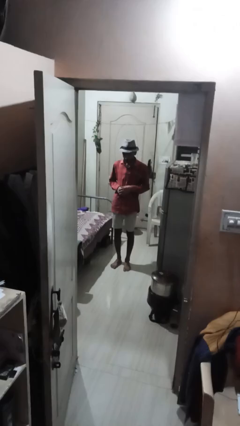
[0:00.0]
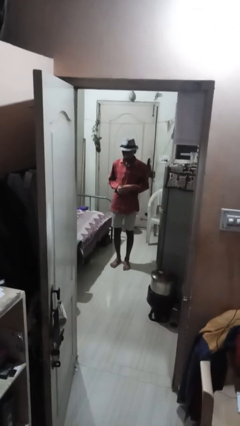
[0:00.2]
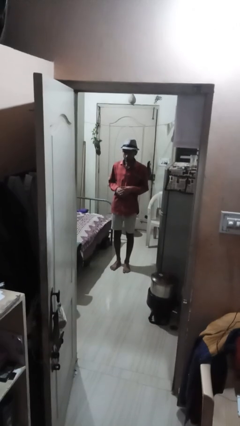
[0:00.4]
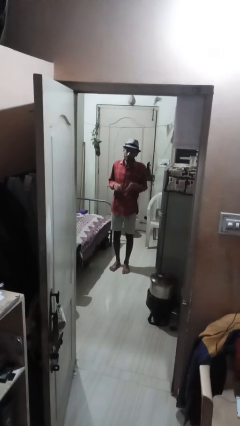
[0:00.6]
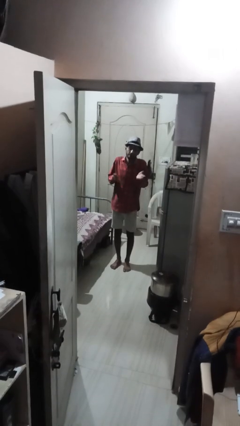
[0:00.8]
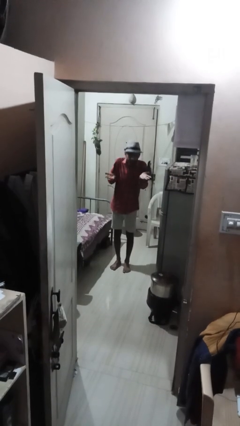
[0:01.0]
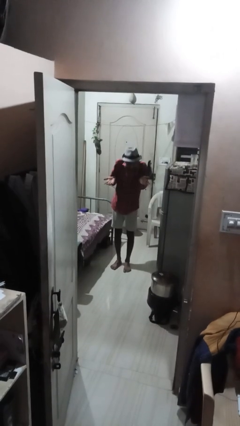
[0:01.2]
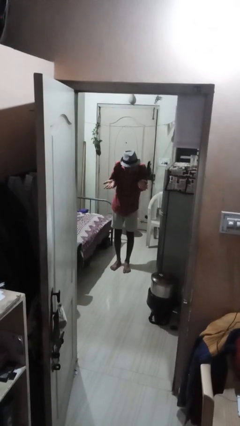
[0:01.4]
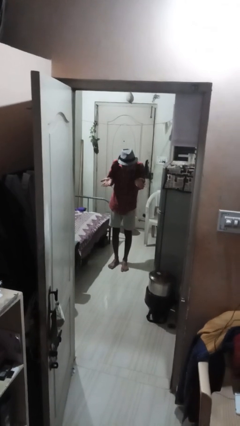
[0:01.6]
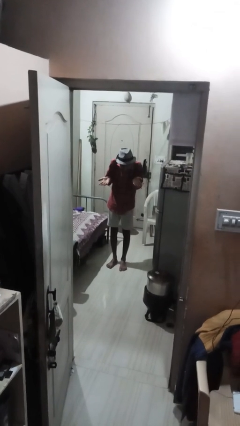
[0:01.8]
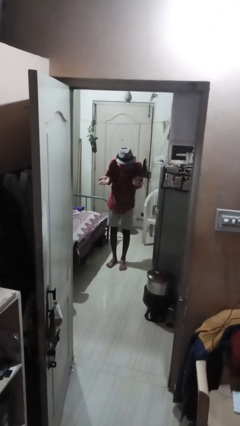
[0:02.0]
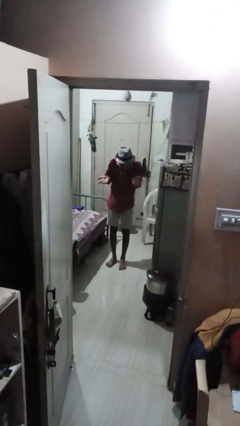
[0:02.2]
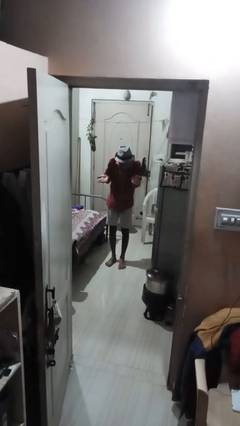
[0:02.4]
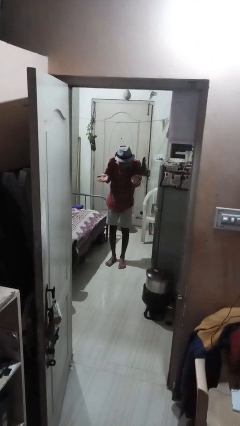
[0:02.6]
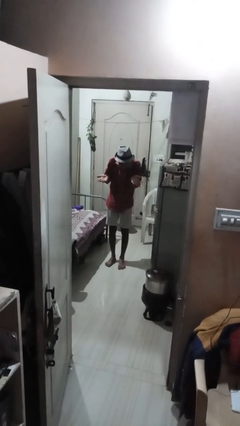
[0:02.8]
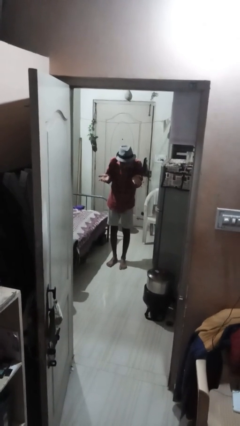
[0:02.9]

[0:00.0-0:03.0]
person shrugs

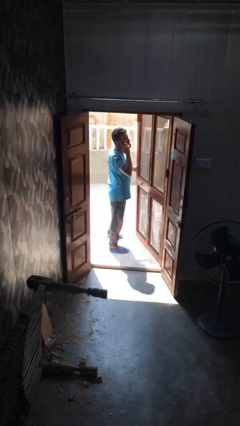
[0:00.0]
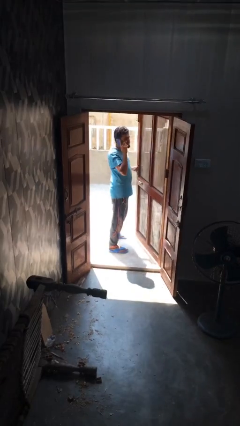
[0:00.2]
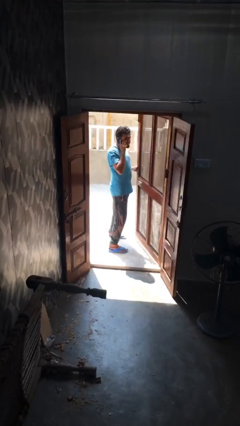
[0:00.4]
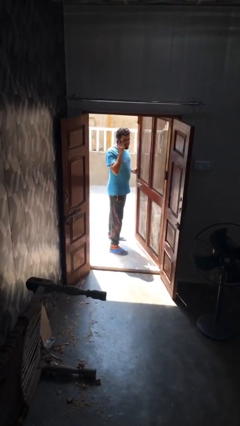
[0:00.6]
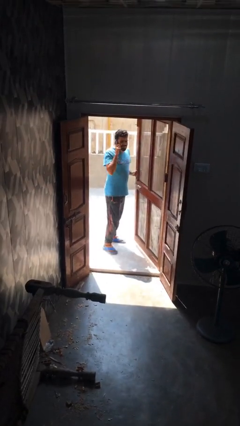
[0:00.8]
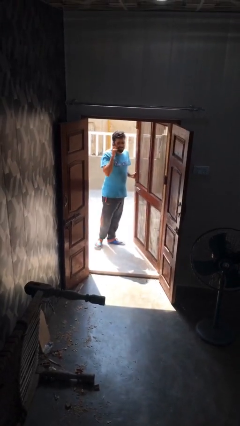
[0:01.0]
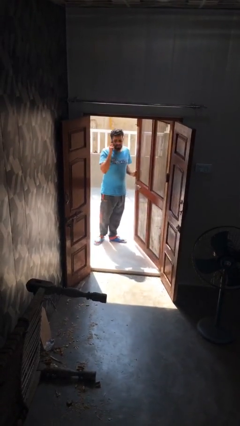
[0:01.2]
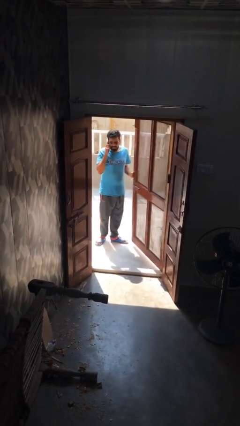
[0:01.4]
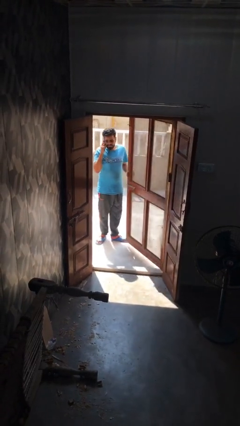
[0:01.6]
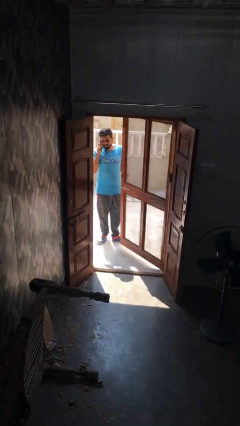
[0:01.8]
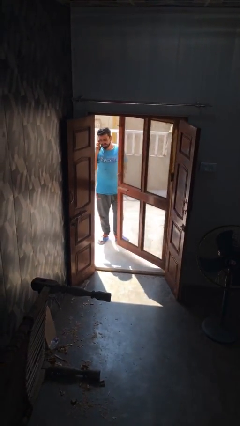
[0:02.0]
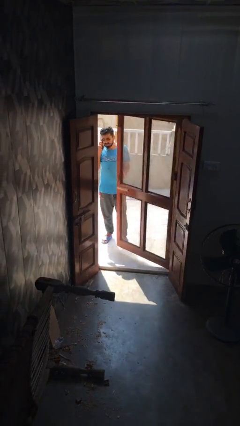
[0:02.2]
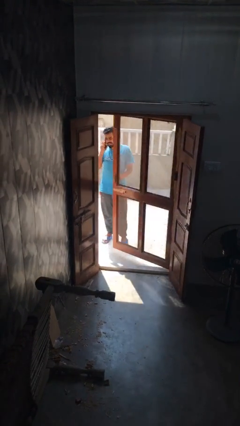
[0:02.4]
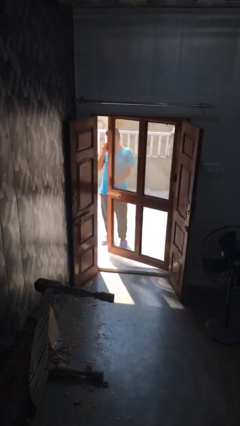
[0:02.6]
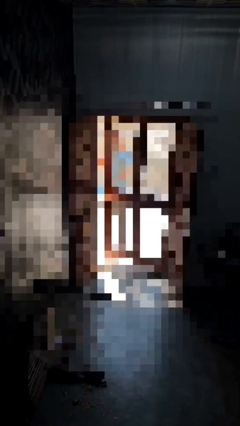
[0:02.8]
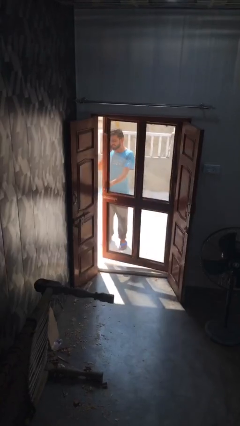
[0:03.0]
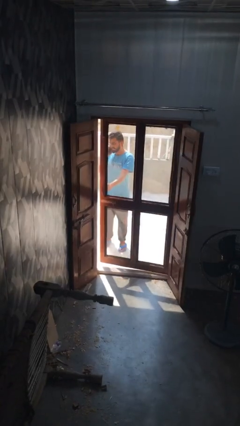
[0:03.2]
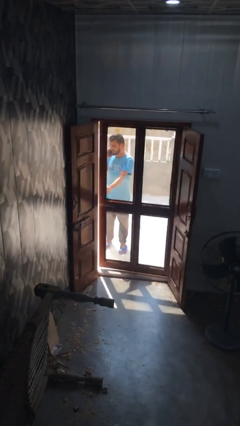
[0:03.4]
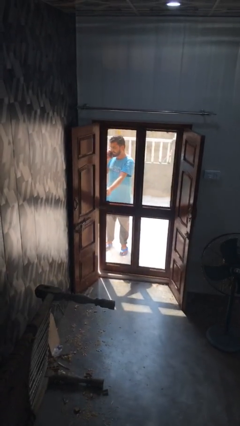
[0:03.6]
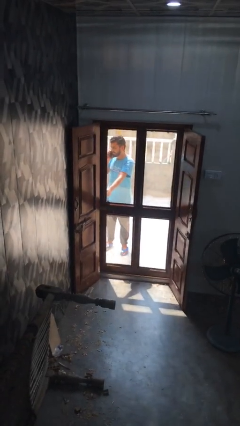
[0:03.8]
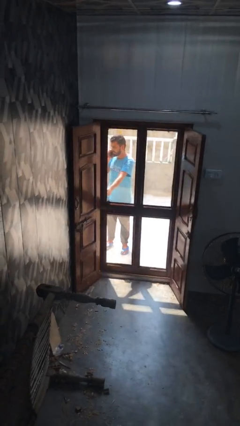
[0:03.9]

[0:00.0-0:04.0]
person exits scene through structure

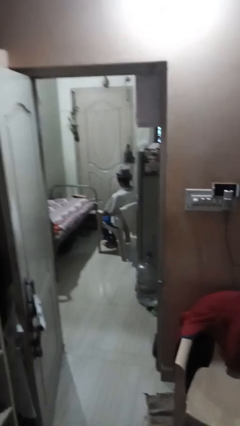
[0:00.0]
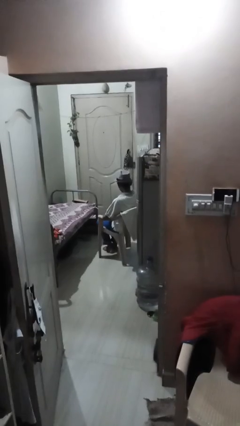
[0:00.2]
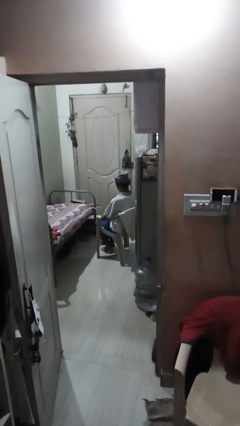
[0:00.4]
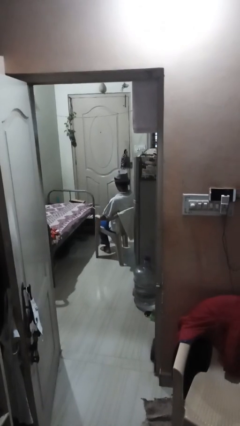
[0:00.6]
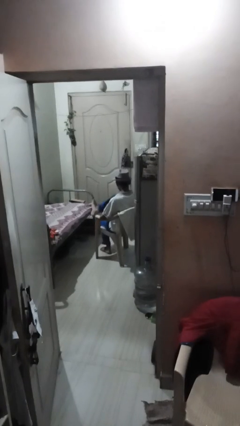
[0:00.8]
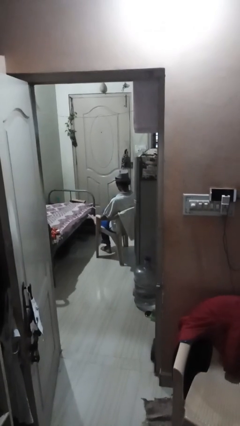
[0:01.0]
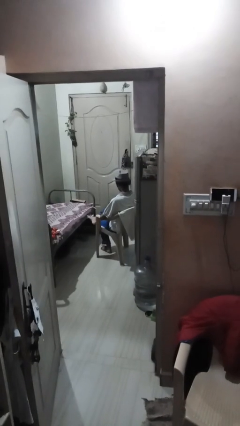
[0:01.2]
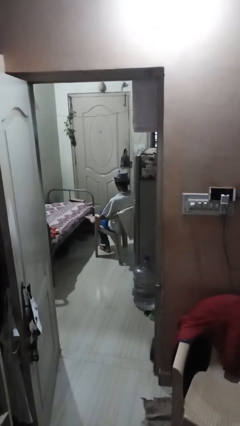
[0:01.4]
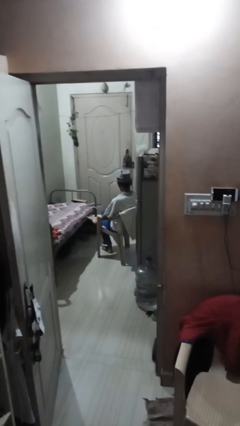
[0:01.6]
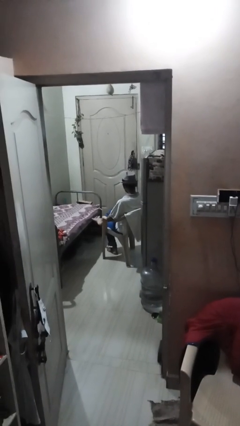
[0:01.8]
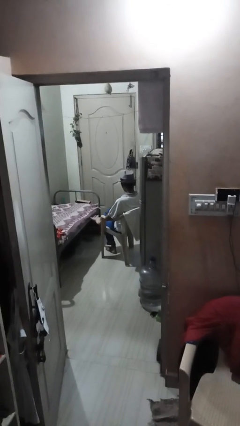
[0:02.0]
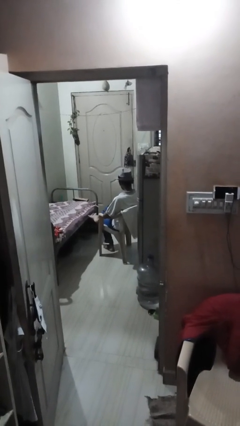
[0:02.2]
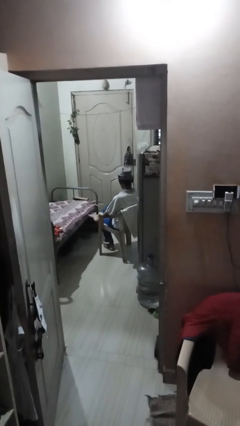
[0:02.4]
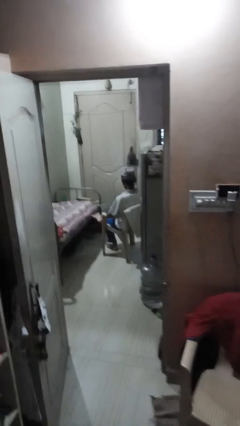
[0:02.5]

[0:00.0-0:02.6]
person crosses legs

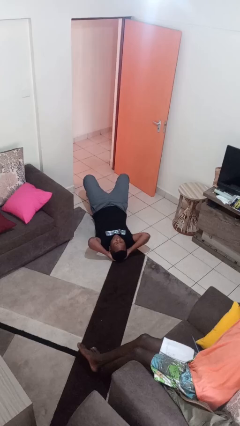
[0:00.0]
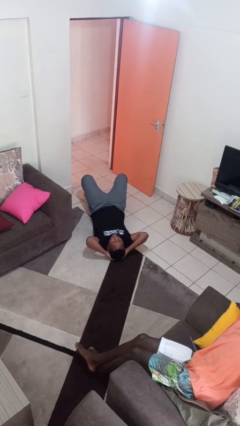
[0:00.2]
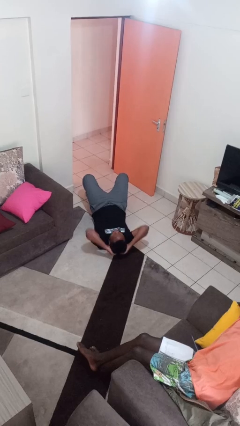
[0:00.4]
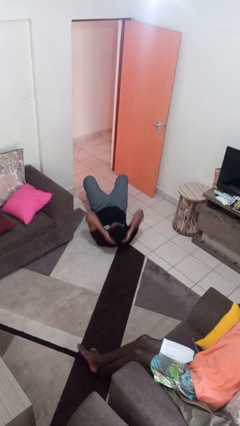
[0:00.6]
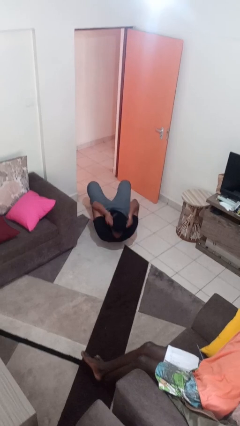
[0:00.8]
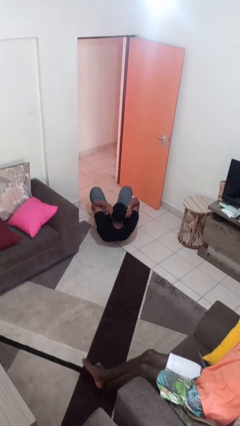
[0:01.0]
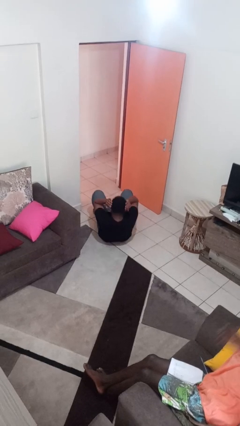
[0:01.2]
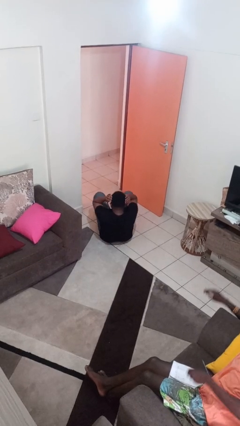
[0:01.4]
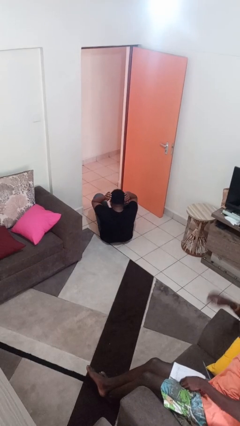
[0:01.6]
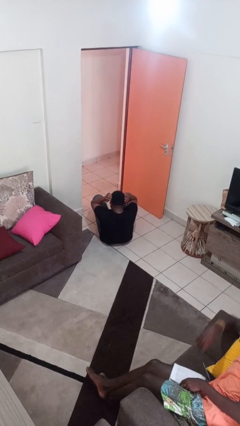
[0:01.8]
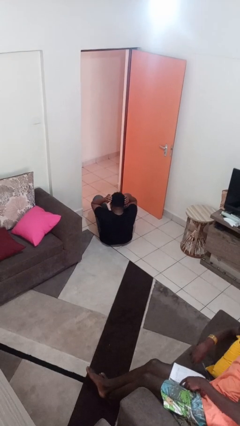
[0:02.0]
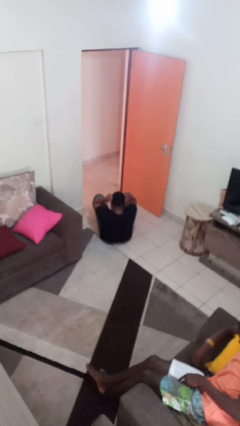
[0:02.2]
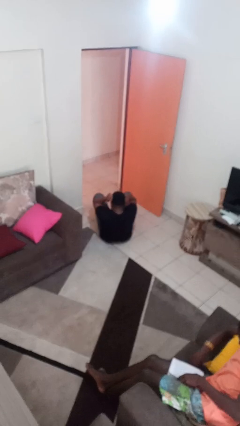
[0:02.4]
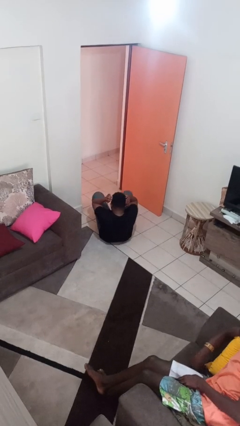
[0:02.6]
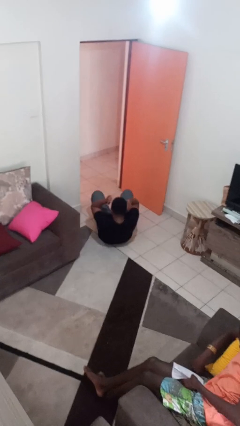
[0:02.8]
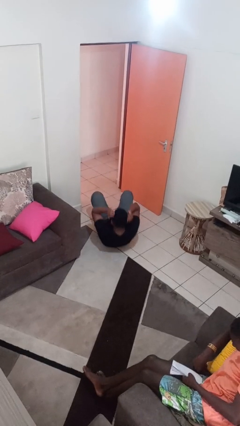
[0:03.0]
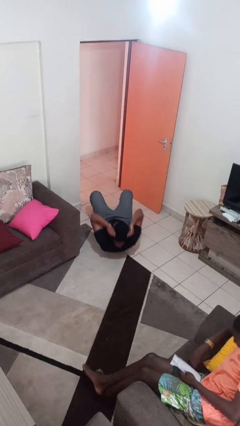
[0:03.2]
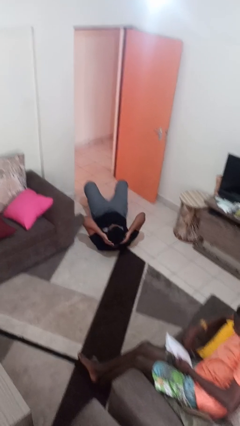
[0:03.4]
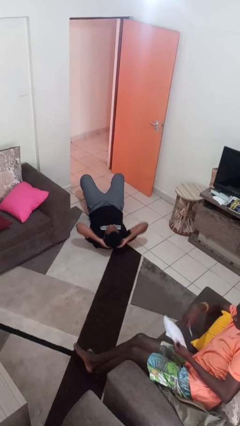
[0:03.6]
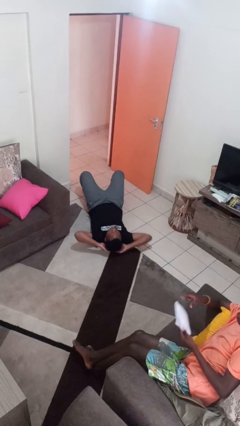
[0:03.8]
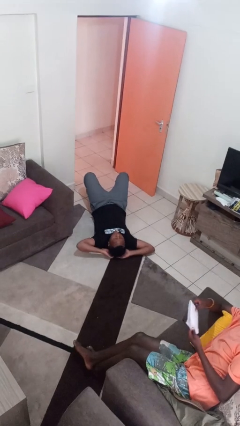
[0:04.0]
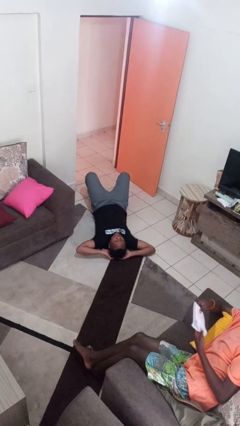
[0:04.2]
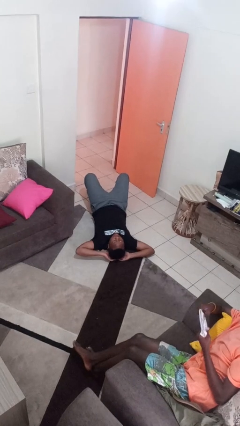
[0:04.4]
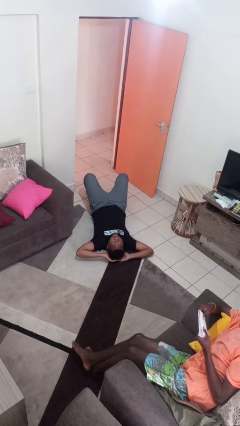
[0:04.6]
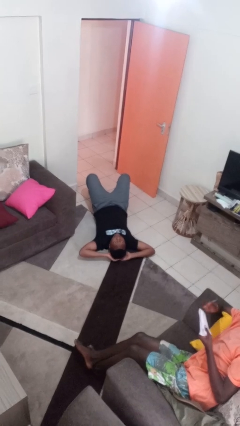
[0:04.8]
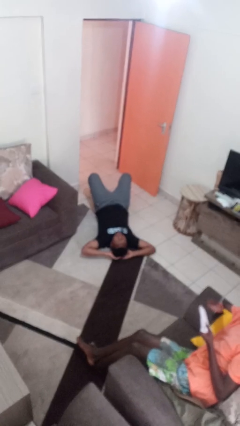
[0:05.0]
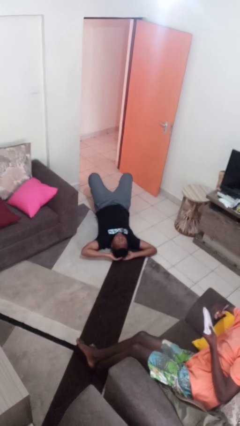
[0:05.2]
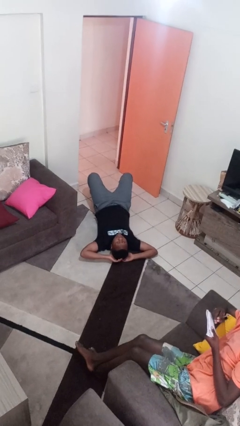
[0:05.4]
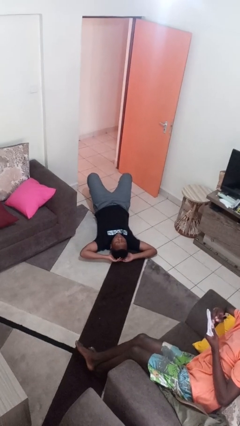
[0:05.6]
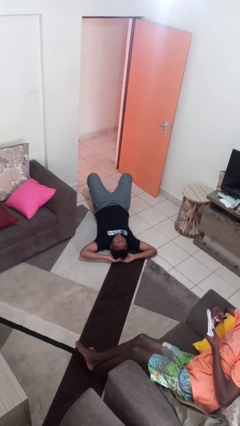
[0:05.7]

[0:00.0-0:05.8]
person exercises with situp

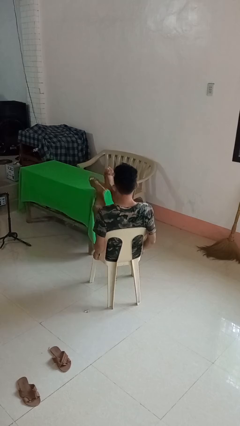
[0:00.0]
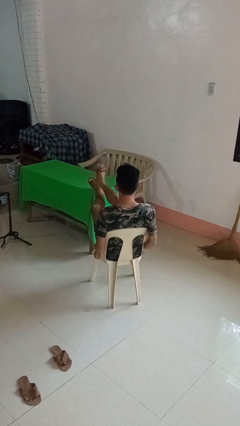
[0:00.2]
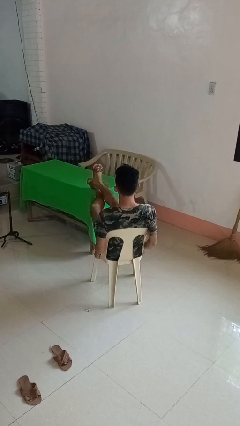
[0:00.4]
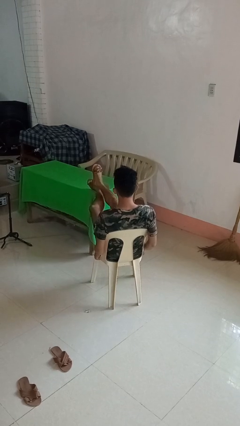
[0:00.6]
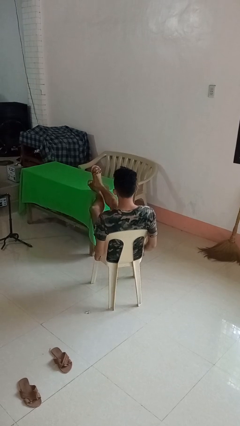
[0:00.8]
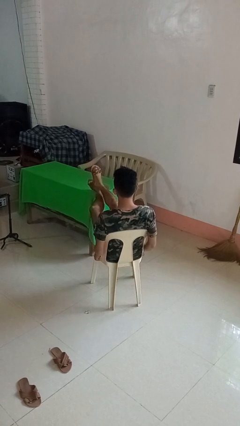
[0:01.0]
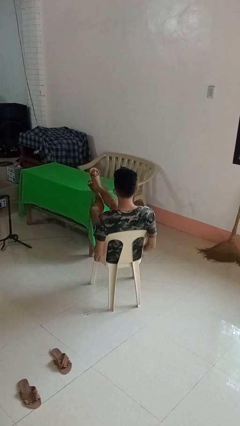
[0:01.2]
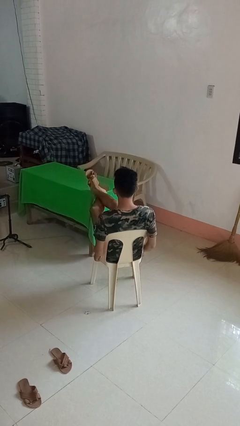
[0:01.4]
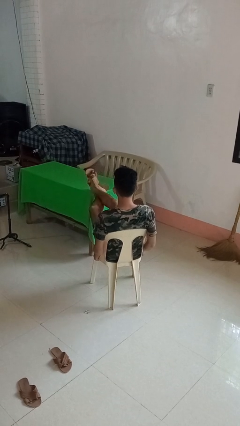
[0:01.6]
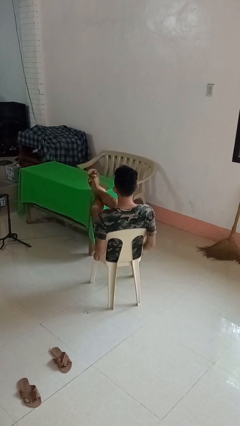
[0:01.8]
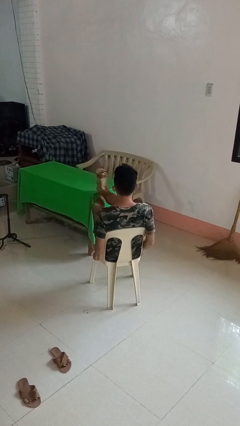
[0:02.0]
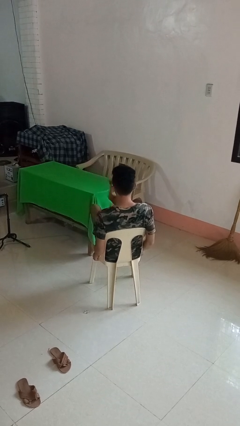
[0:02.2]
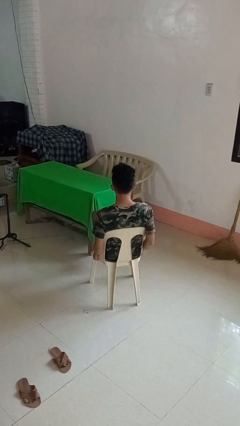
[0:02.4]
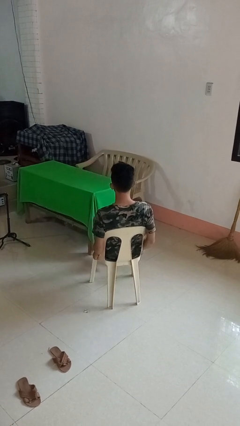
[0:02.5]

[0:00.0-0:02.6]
person puts feet up
